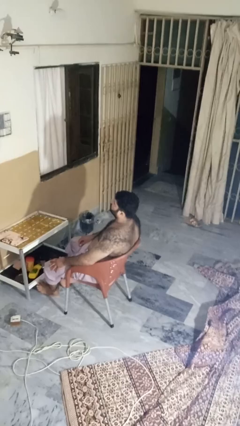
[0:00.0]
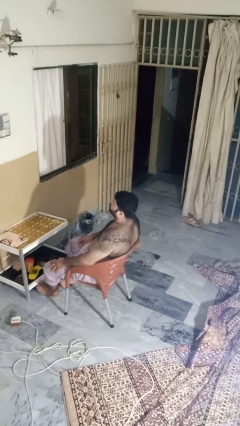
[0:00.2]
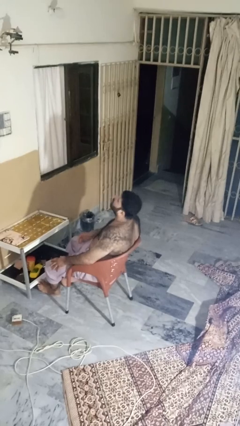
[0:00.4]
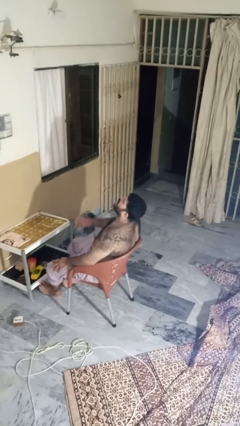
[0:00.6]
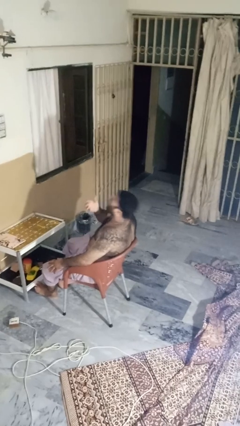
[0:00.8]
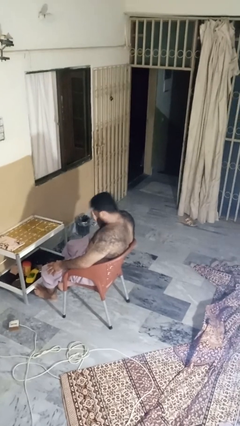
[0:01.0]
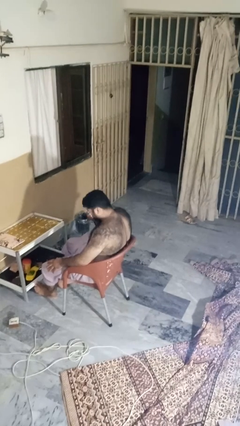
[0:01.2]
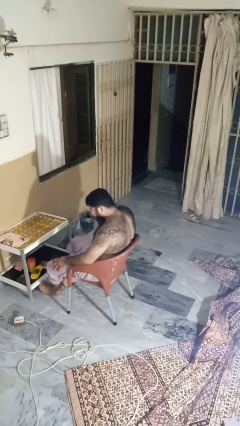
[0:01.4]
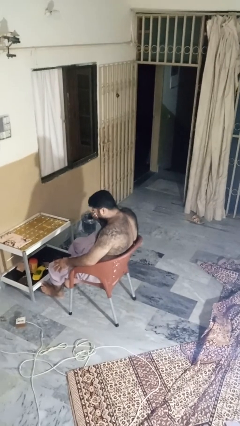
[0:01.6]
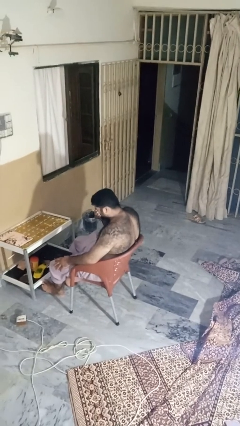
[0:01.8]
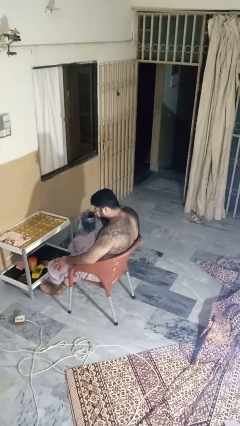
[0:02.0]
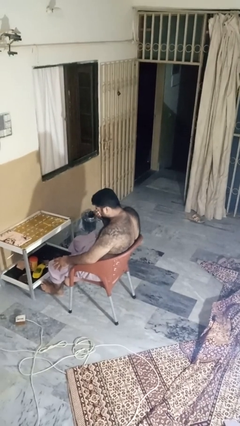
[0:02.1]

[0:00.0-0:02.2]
person sneezes into hand

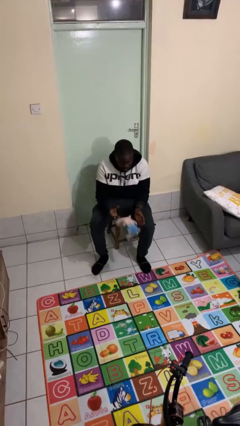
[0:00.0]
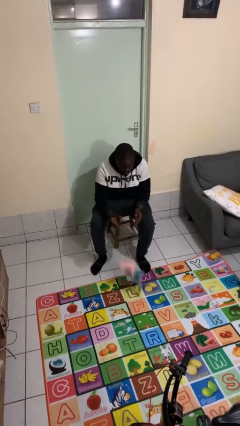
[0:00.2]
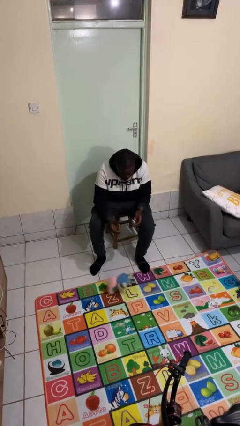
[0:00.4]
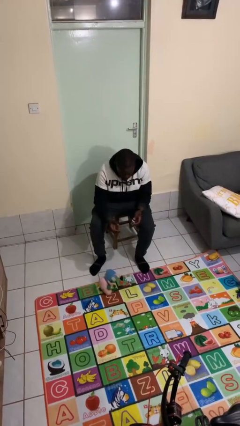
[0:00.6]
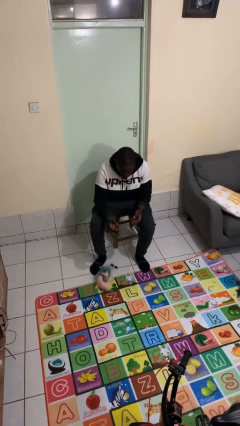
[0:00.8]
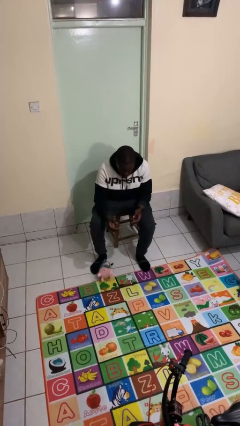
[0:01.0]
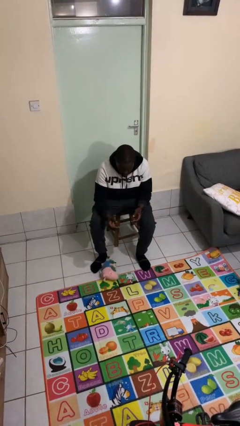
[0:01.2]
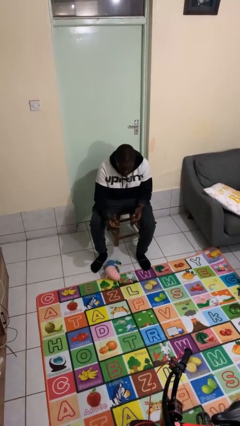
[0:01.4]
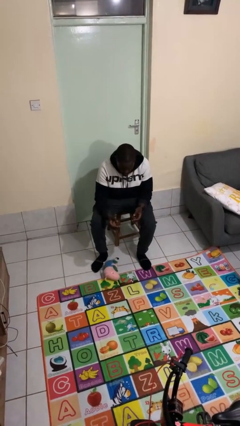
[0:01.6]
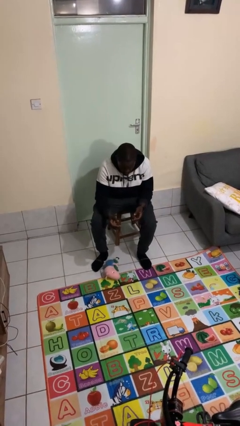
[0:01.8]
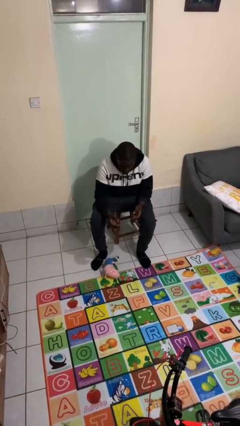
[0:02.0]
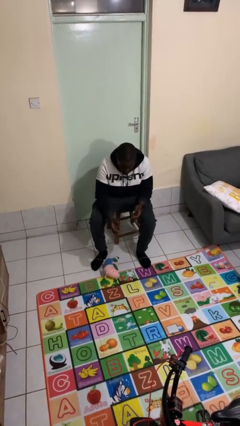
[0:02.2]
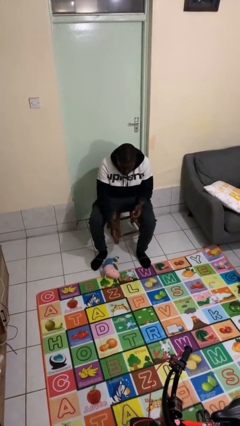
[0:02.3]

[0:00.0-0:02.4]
person drops object

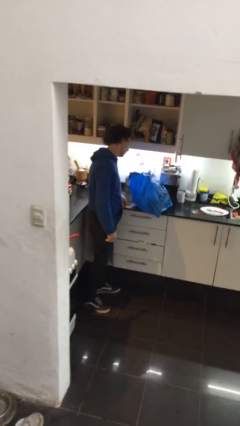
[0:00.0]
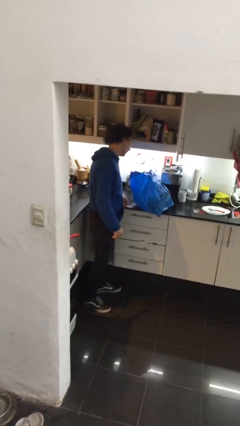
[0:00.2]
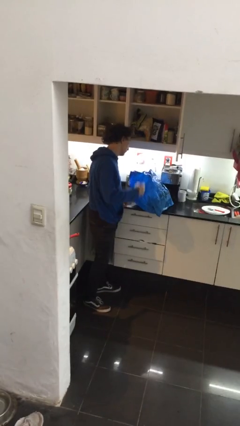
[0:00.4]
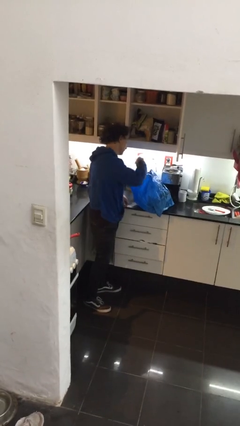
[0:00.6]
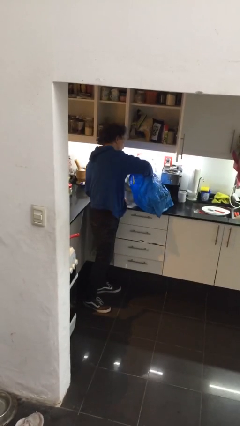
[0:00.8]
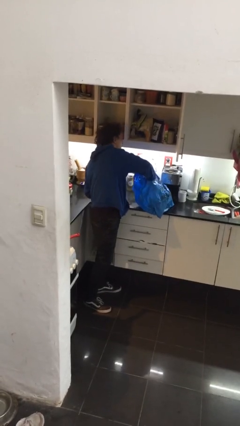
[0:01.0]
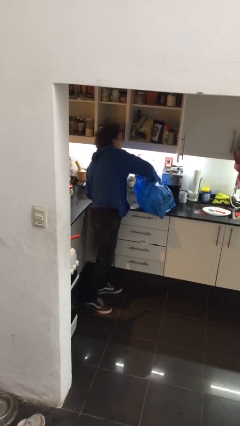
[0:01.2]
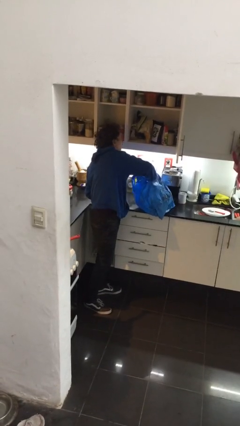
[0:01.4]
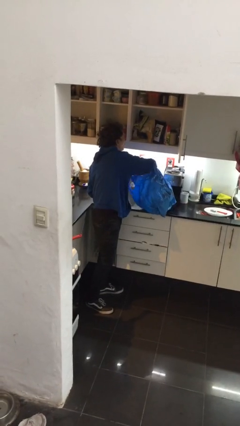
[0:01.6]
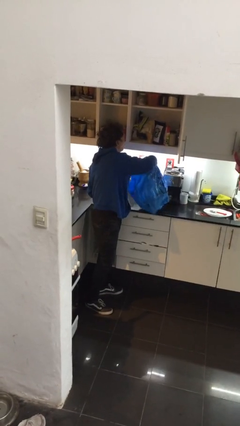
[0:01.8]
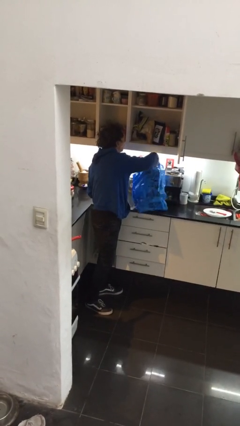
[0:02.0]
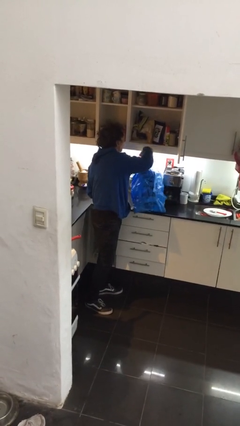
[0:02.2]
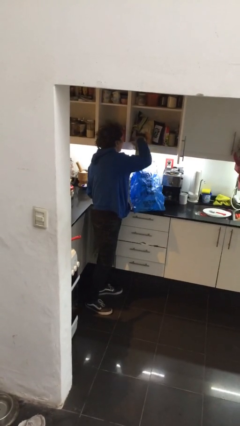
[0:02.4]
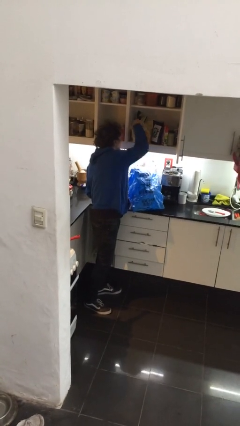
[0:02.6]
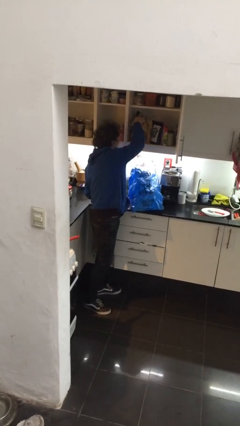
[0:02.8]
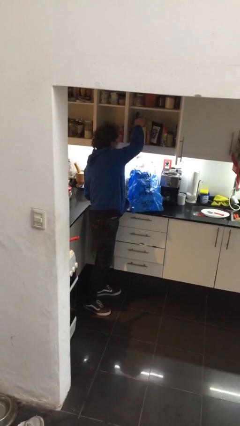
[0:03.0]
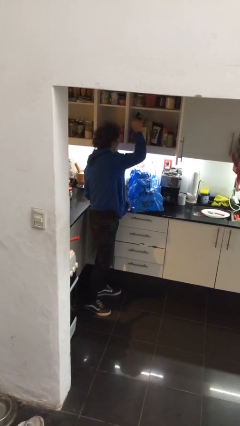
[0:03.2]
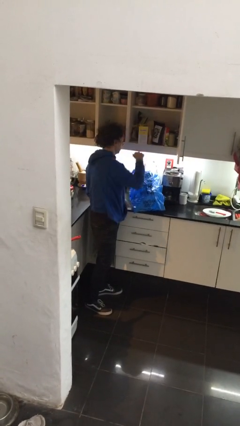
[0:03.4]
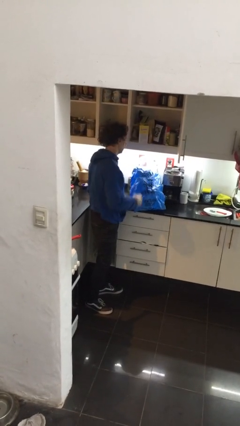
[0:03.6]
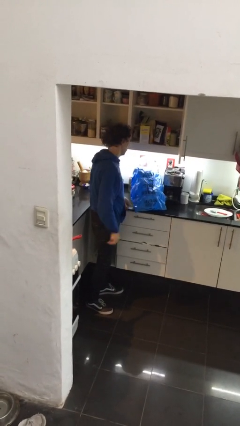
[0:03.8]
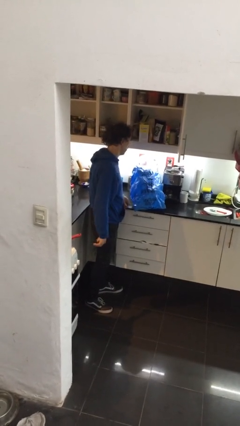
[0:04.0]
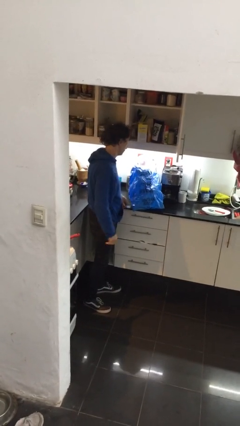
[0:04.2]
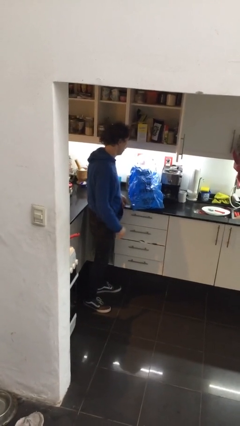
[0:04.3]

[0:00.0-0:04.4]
person loads groceries into cabinet

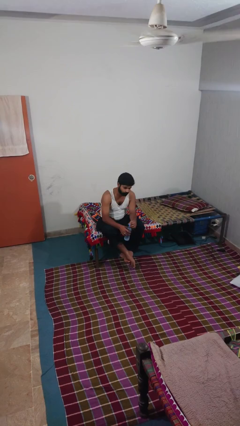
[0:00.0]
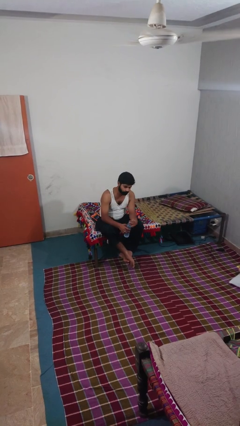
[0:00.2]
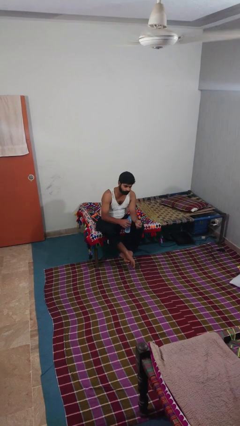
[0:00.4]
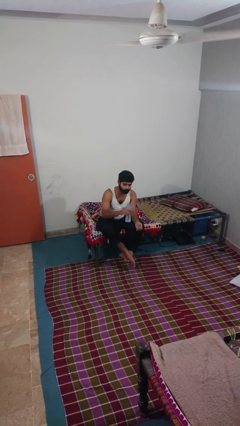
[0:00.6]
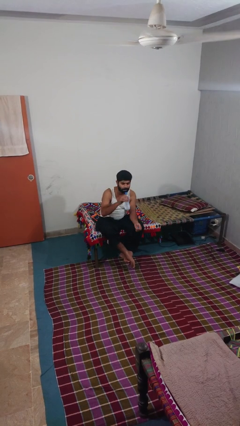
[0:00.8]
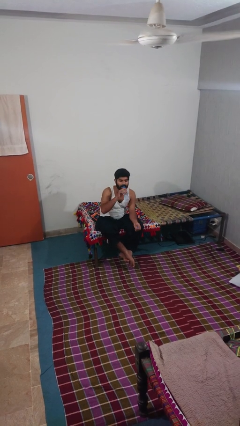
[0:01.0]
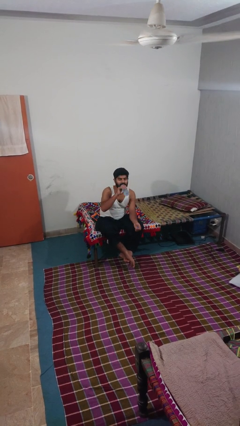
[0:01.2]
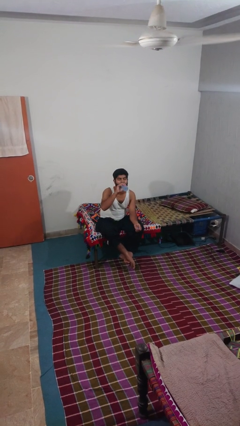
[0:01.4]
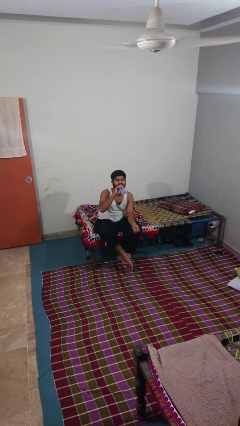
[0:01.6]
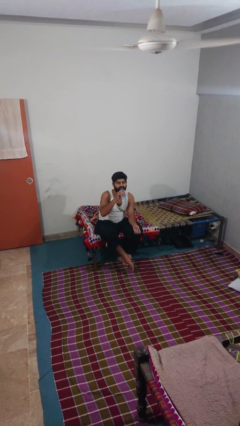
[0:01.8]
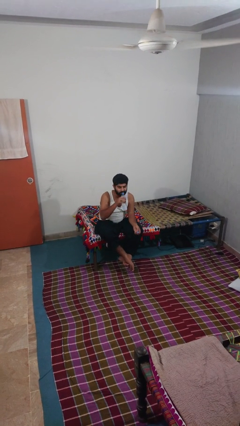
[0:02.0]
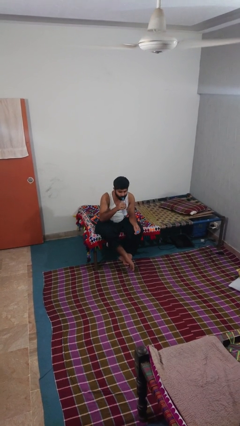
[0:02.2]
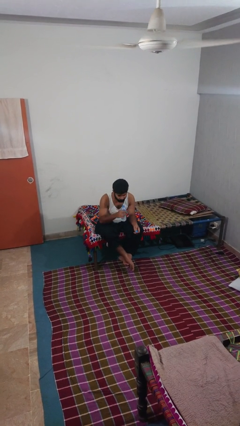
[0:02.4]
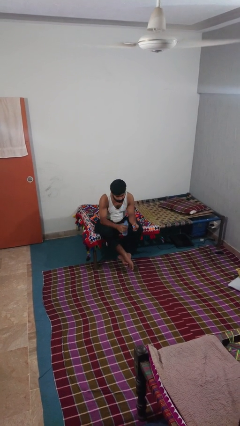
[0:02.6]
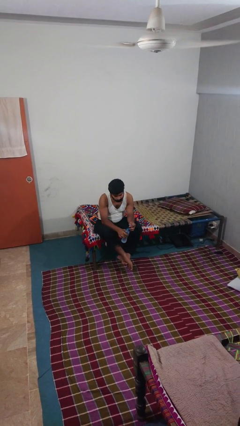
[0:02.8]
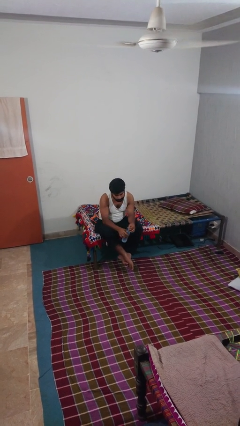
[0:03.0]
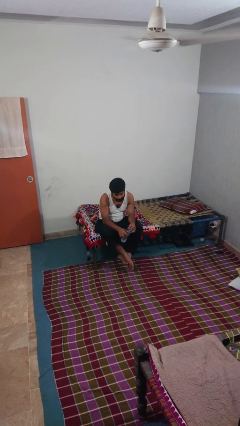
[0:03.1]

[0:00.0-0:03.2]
person drinks from bottle

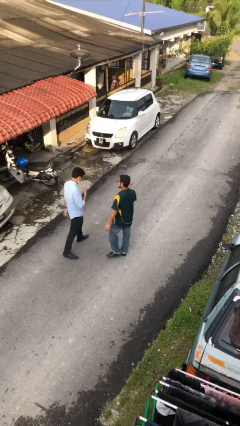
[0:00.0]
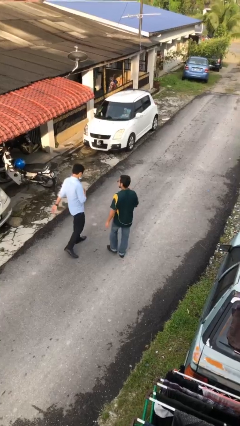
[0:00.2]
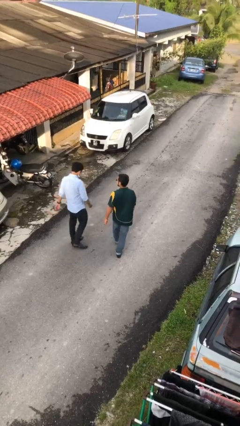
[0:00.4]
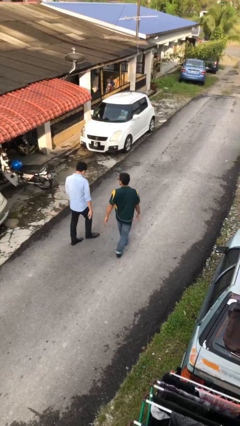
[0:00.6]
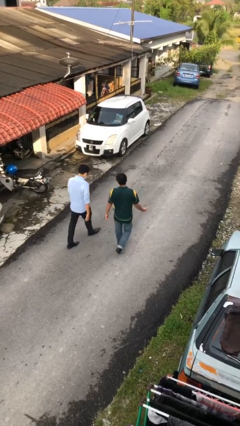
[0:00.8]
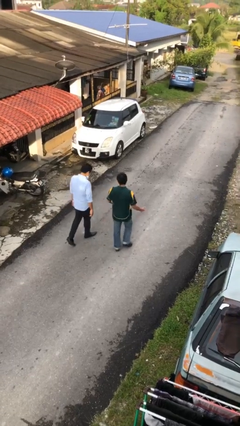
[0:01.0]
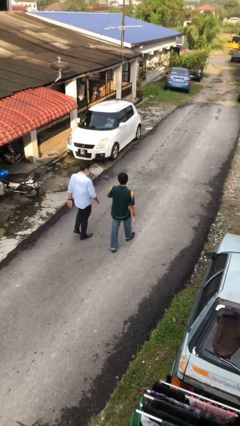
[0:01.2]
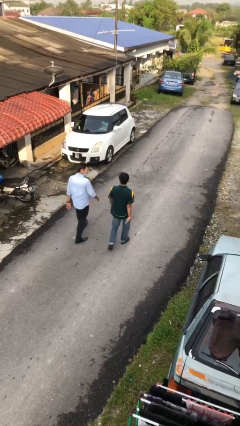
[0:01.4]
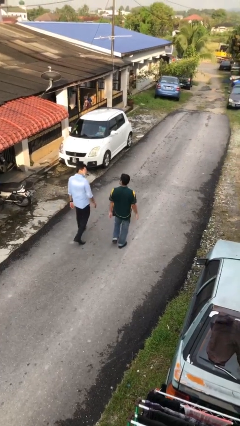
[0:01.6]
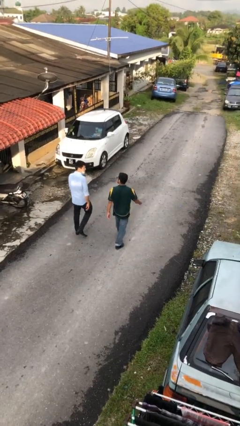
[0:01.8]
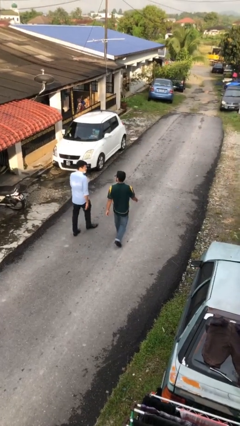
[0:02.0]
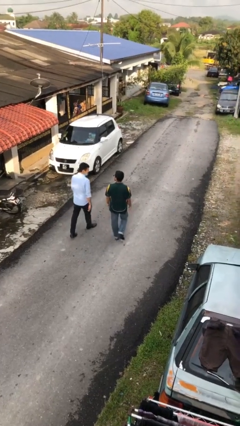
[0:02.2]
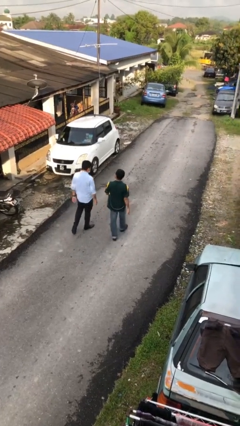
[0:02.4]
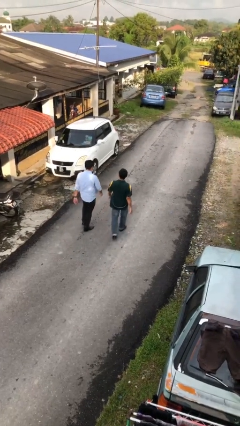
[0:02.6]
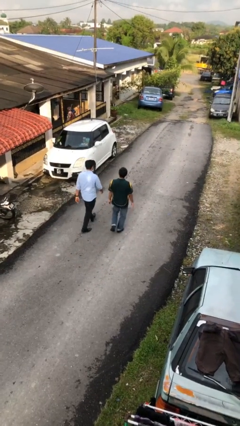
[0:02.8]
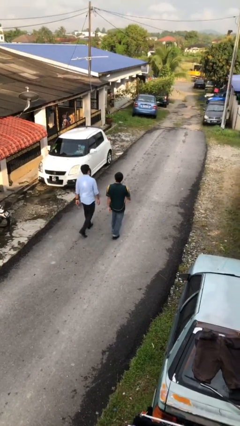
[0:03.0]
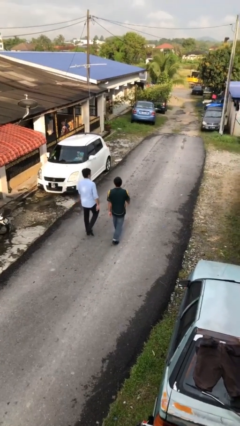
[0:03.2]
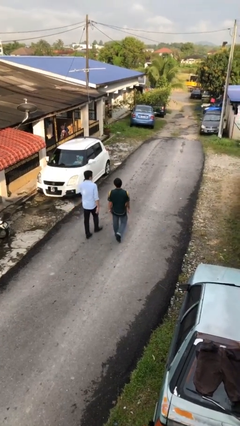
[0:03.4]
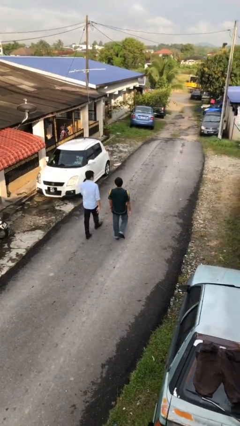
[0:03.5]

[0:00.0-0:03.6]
person talks to person

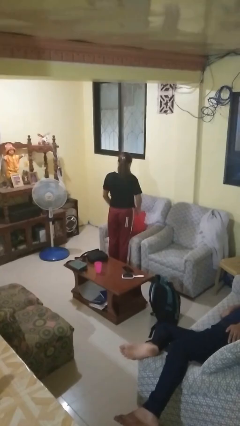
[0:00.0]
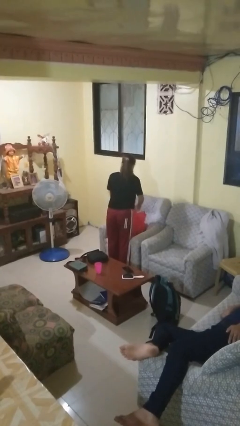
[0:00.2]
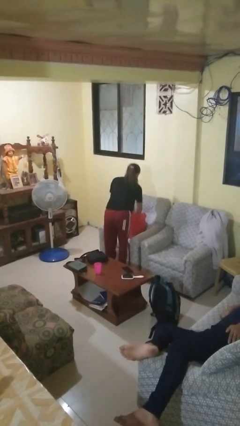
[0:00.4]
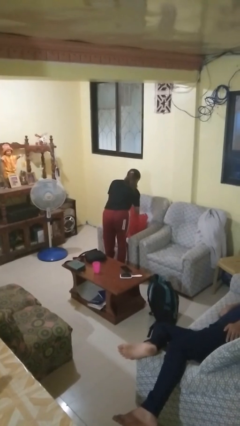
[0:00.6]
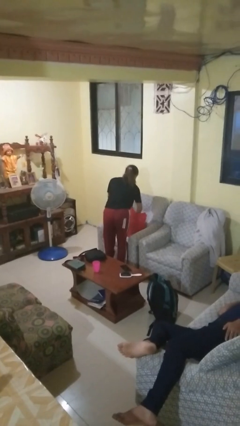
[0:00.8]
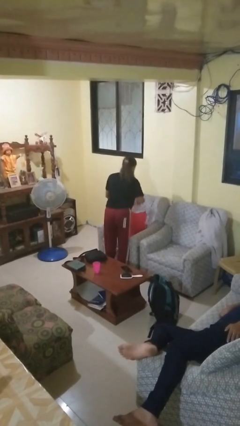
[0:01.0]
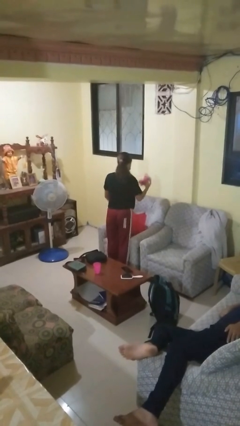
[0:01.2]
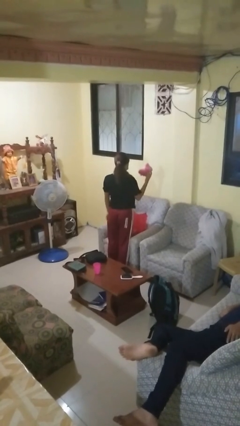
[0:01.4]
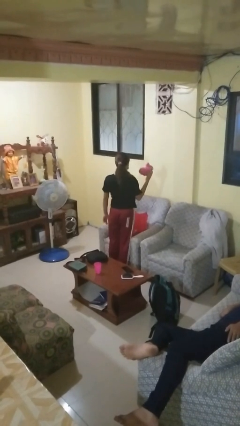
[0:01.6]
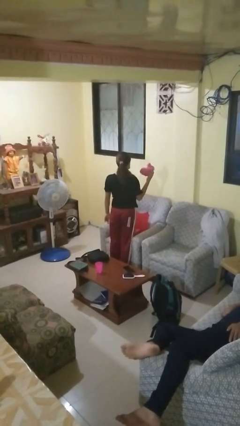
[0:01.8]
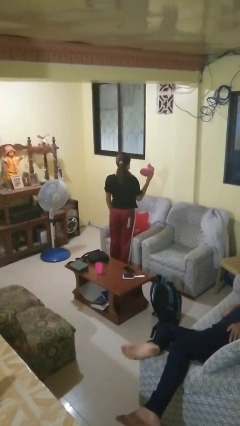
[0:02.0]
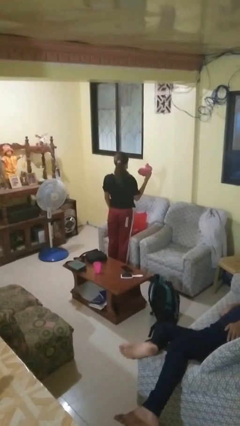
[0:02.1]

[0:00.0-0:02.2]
person takes object from bag
